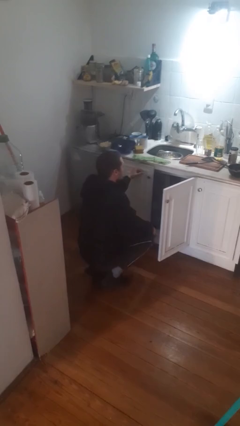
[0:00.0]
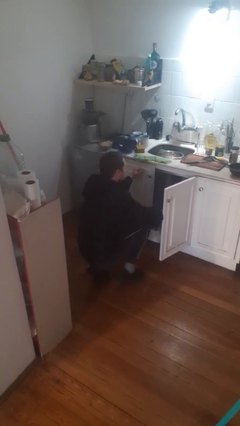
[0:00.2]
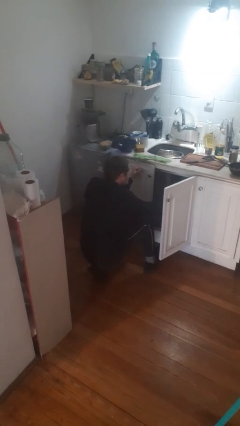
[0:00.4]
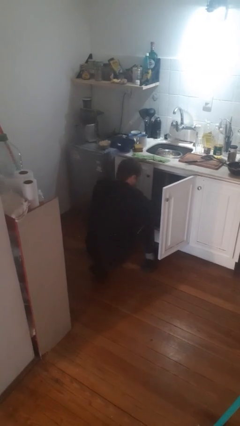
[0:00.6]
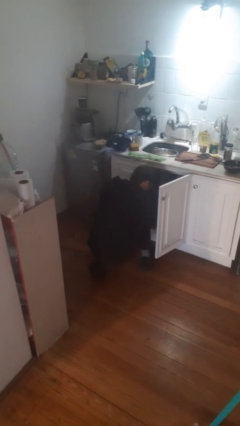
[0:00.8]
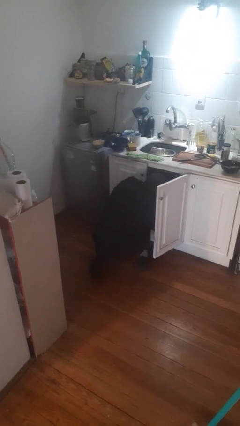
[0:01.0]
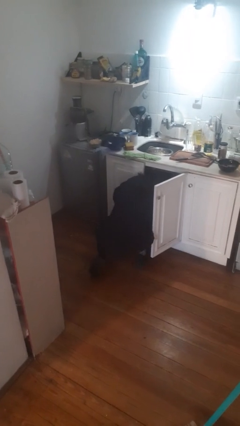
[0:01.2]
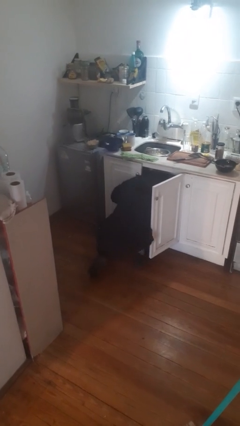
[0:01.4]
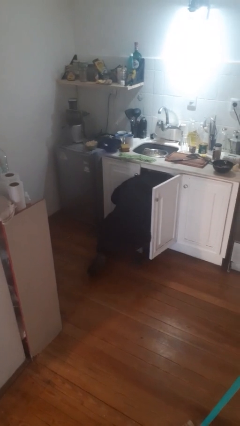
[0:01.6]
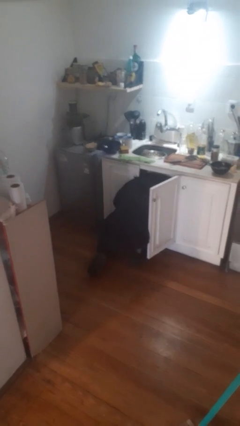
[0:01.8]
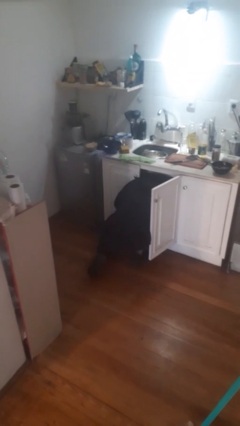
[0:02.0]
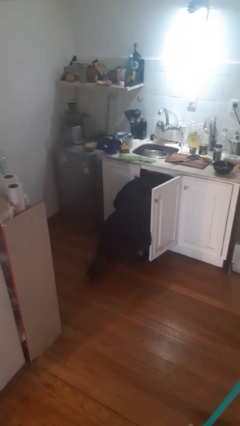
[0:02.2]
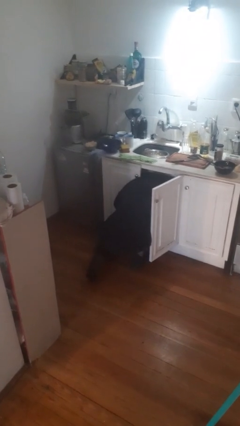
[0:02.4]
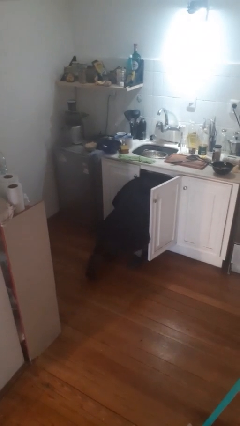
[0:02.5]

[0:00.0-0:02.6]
person searches in cabinet

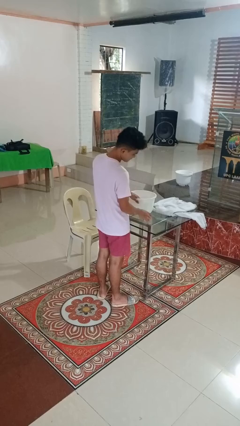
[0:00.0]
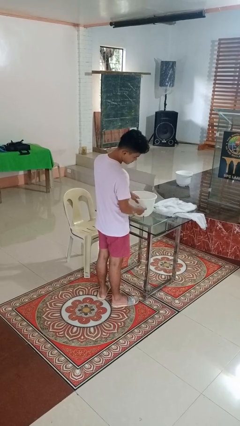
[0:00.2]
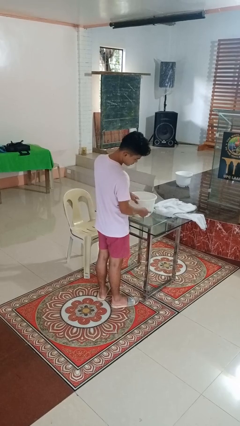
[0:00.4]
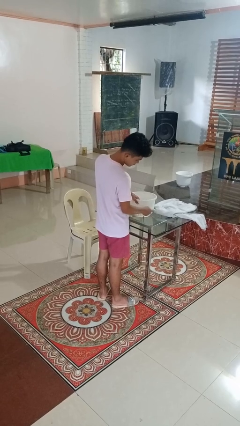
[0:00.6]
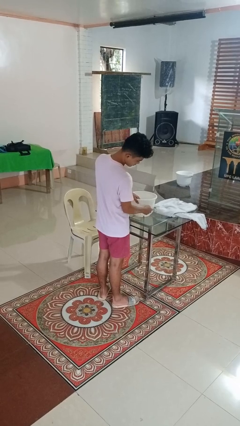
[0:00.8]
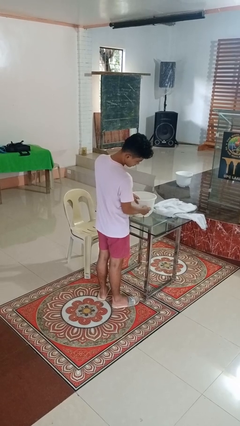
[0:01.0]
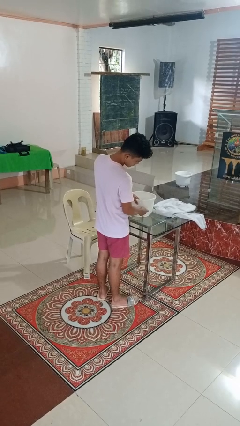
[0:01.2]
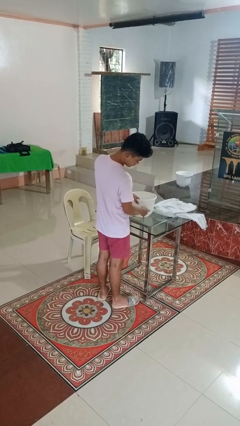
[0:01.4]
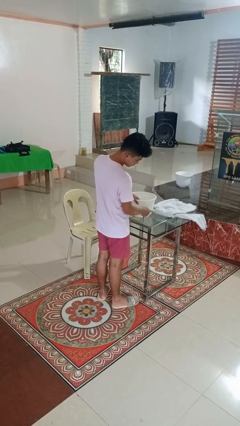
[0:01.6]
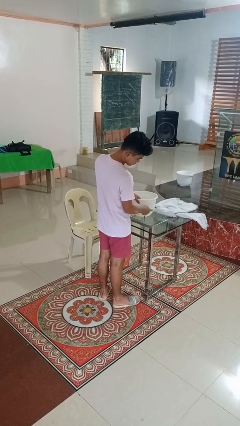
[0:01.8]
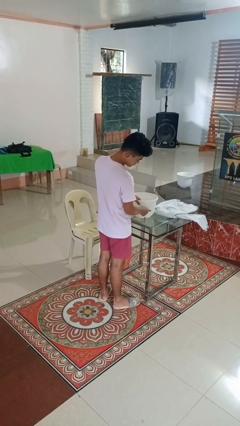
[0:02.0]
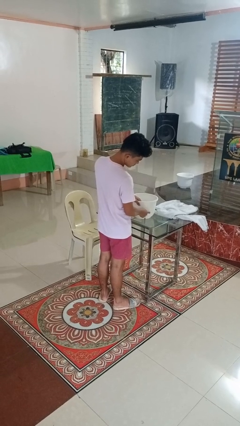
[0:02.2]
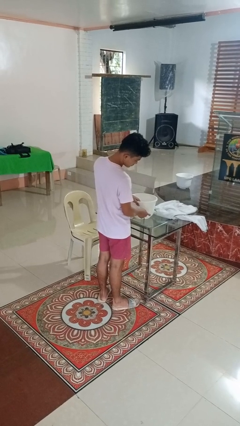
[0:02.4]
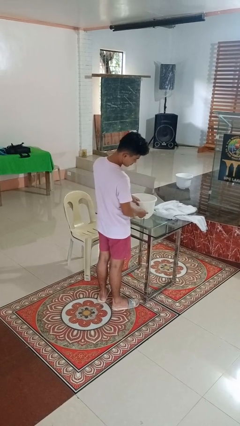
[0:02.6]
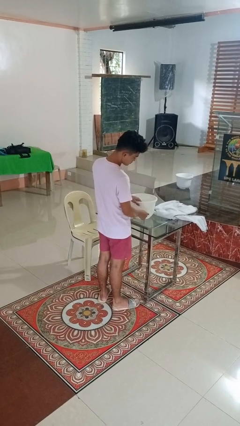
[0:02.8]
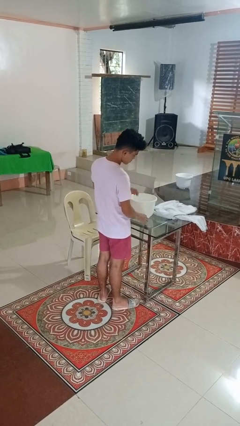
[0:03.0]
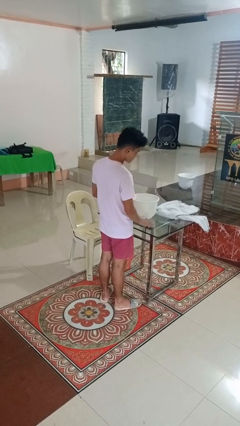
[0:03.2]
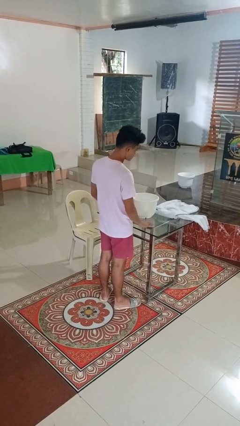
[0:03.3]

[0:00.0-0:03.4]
person taps object with finger

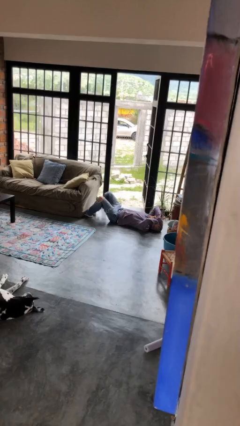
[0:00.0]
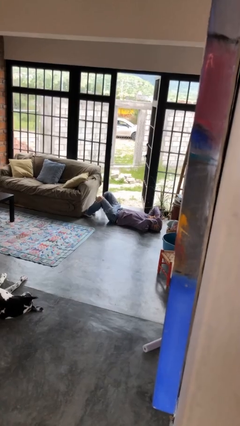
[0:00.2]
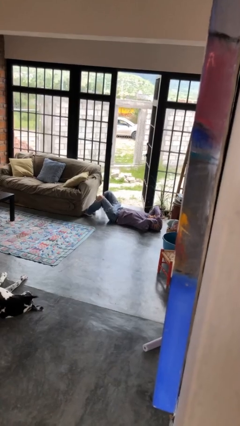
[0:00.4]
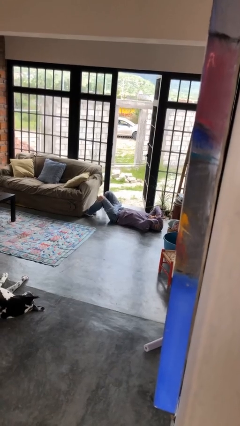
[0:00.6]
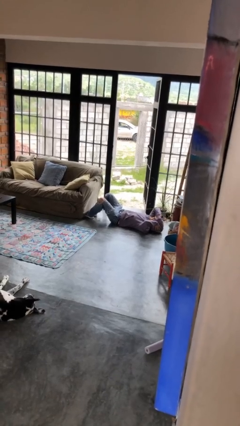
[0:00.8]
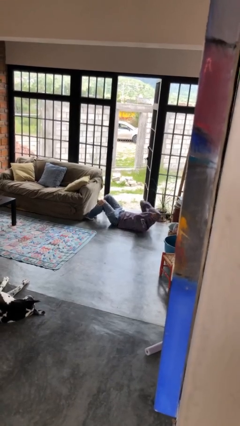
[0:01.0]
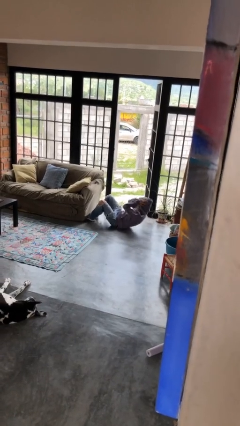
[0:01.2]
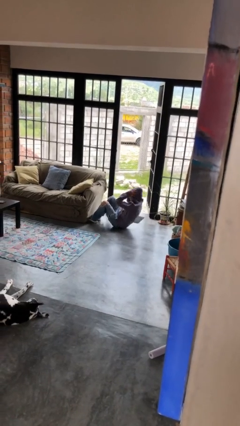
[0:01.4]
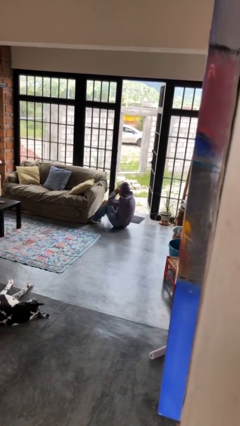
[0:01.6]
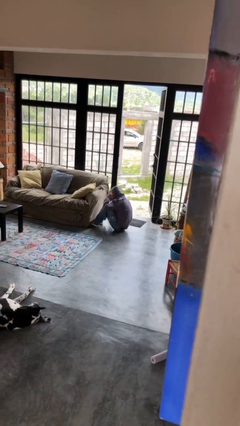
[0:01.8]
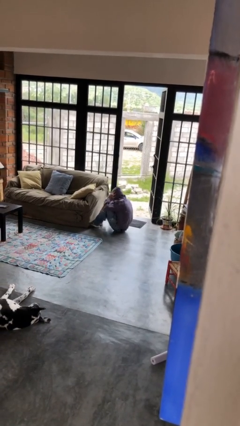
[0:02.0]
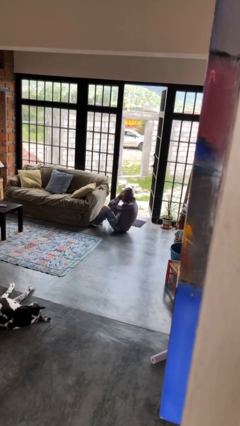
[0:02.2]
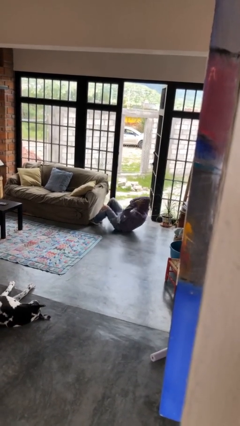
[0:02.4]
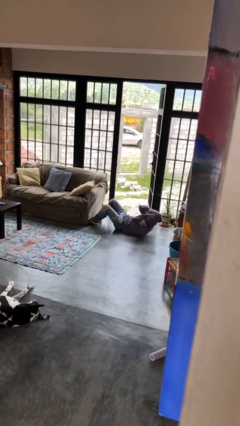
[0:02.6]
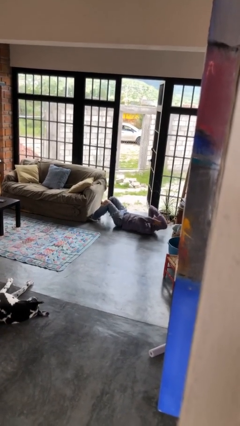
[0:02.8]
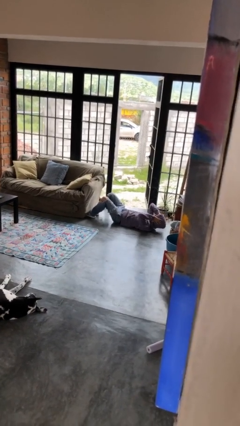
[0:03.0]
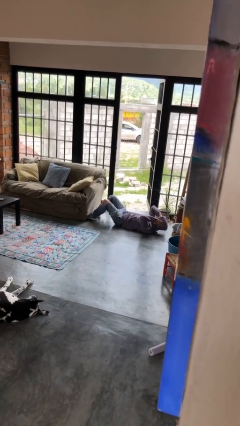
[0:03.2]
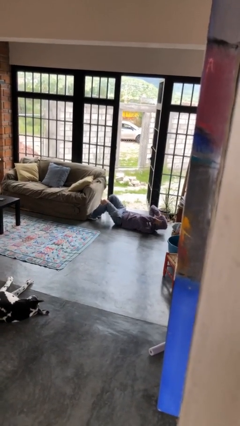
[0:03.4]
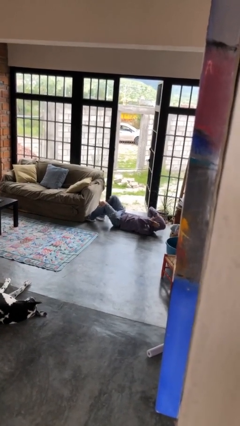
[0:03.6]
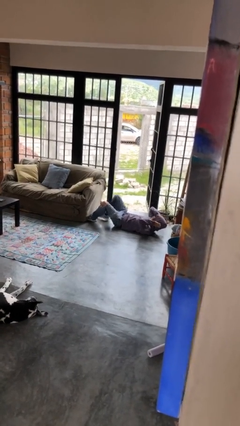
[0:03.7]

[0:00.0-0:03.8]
person exercises with situp

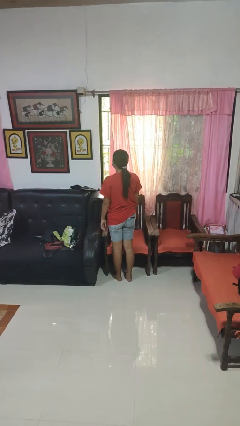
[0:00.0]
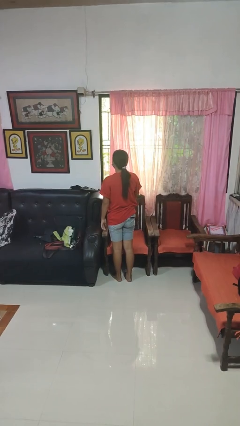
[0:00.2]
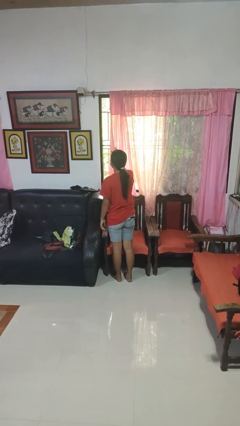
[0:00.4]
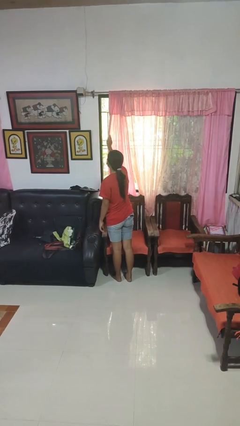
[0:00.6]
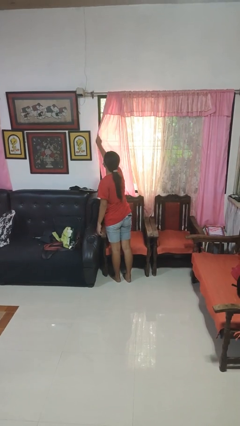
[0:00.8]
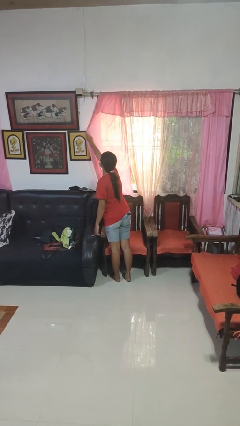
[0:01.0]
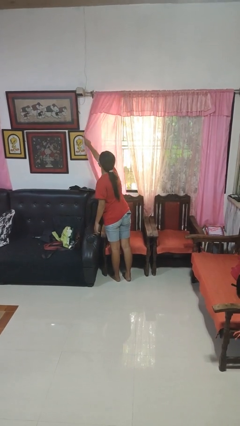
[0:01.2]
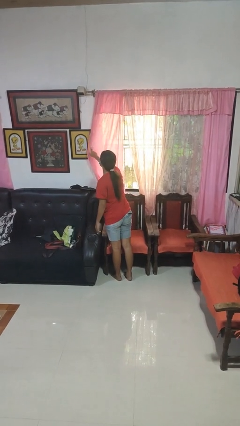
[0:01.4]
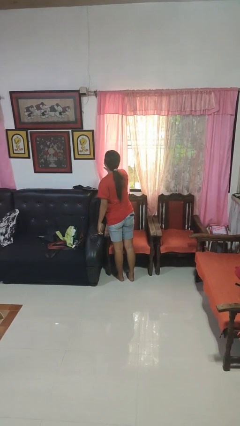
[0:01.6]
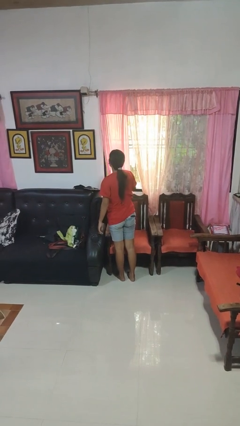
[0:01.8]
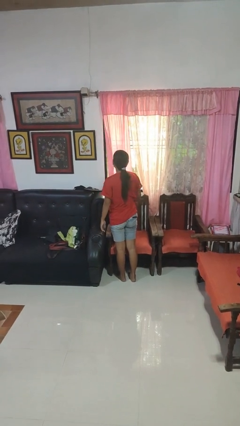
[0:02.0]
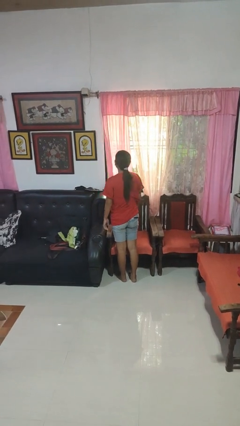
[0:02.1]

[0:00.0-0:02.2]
person closes curtains

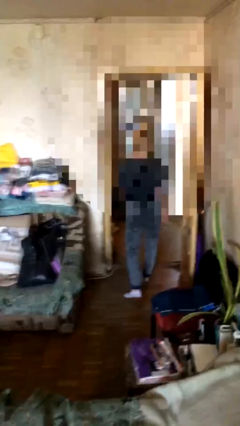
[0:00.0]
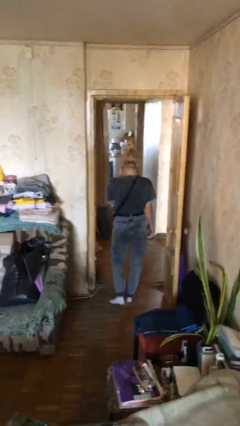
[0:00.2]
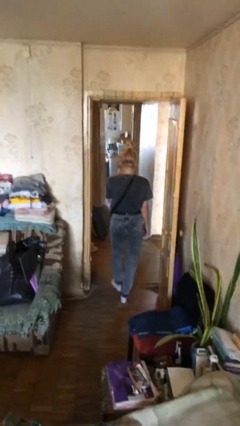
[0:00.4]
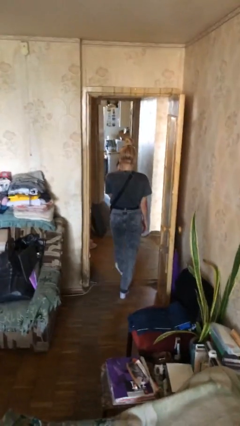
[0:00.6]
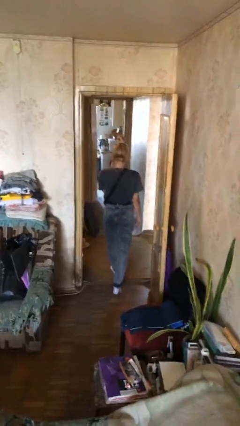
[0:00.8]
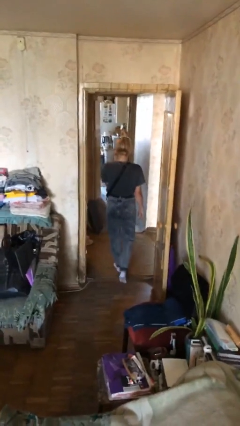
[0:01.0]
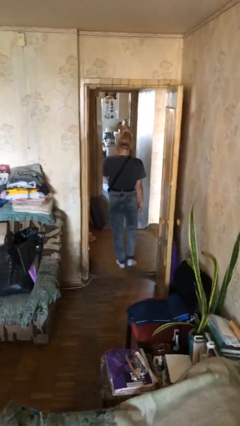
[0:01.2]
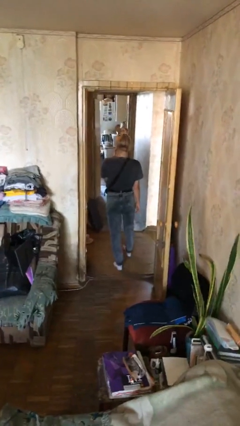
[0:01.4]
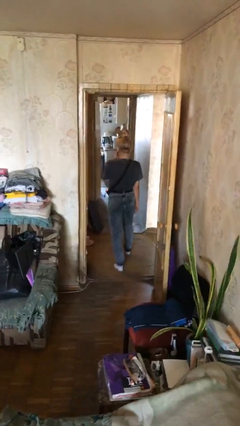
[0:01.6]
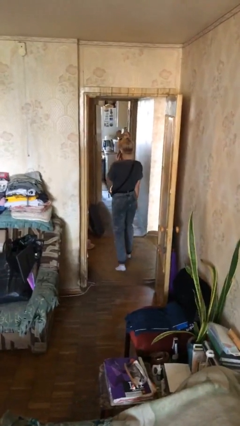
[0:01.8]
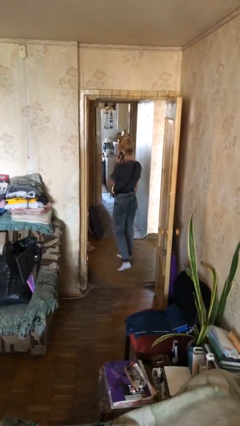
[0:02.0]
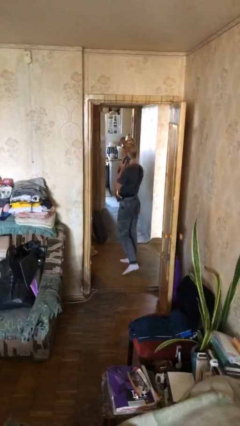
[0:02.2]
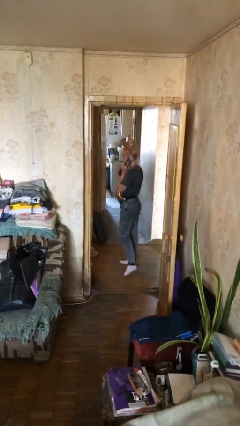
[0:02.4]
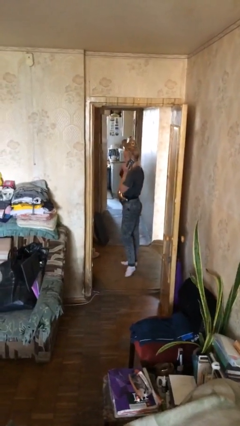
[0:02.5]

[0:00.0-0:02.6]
person exits scene through structure

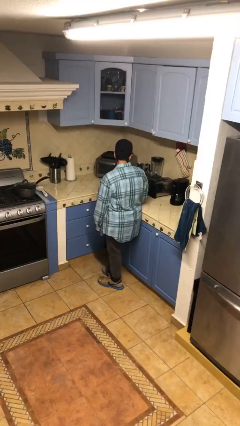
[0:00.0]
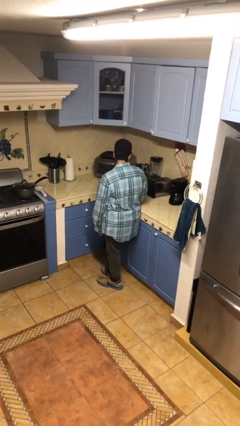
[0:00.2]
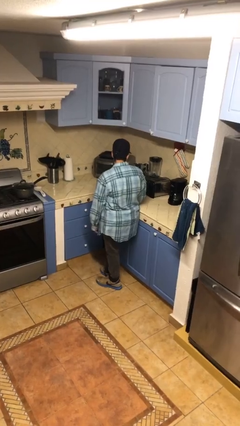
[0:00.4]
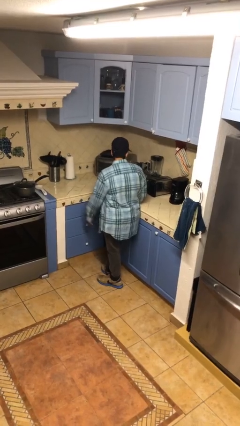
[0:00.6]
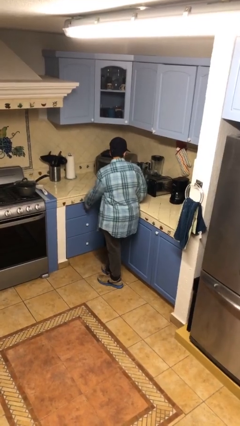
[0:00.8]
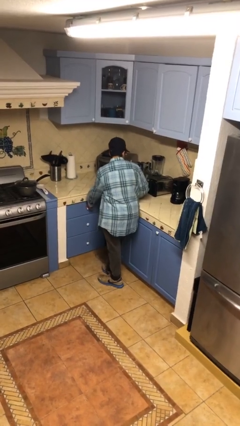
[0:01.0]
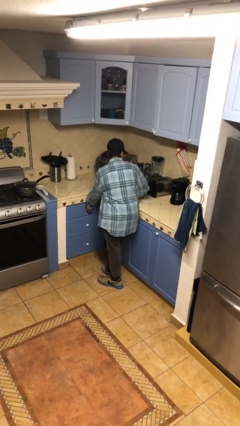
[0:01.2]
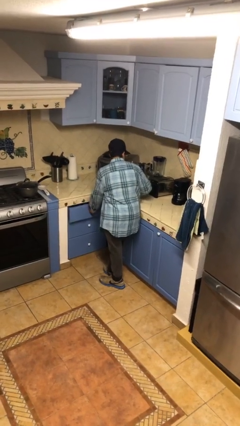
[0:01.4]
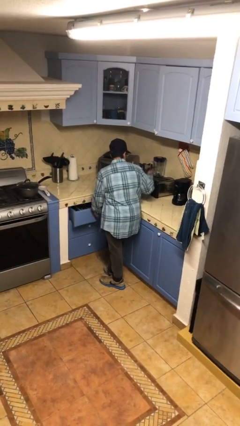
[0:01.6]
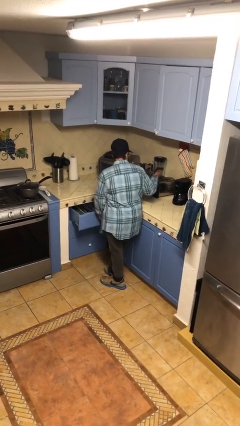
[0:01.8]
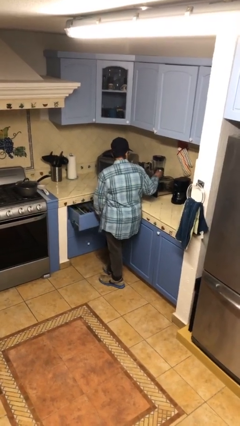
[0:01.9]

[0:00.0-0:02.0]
person opens kitchen drawer

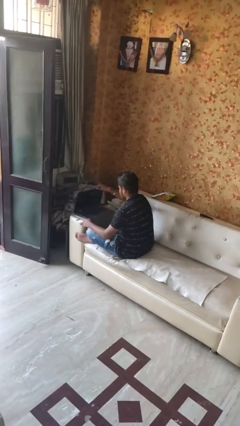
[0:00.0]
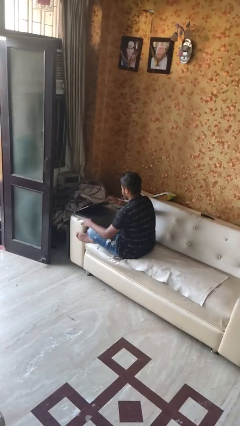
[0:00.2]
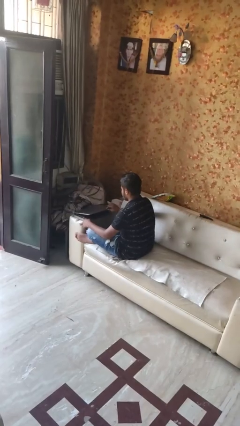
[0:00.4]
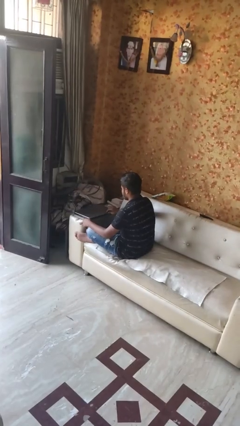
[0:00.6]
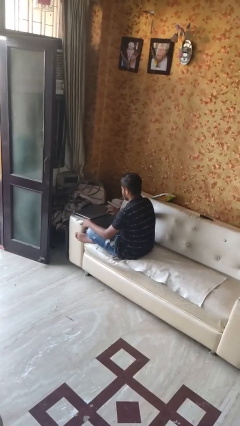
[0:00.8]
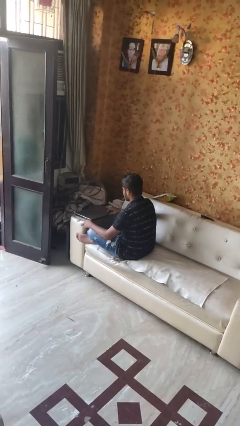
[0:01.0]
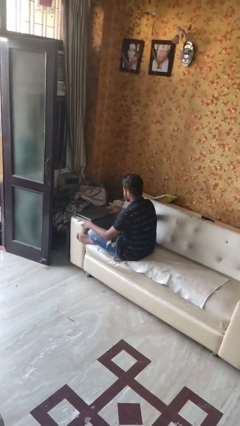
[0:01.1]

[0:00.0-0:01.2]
person closes laptop
